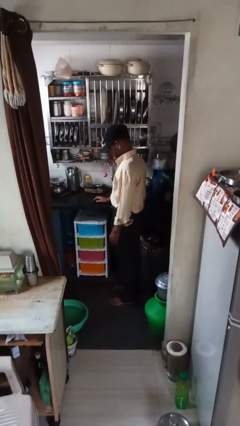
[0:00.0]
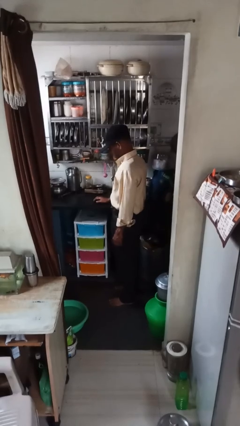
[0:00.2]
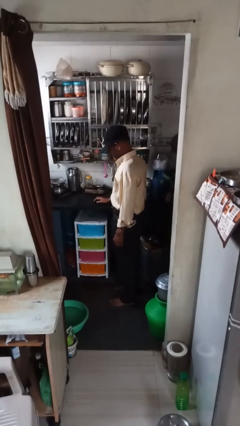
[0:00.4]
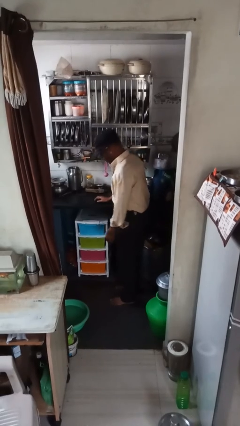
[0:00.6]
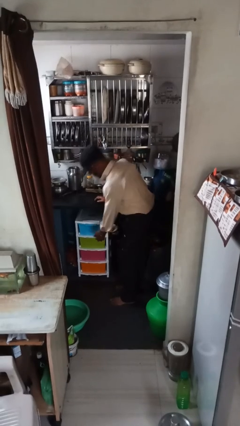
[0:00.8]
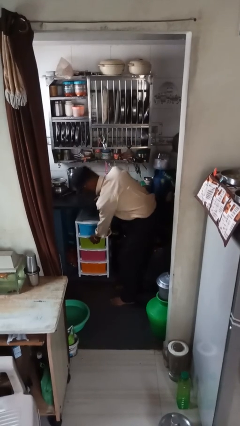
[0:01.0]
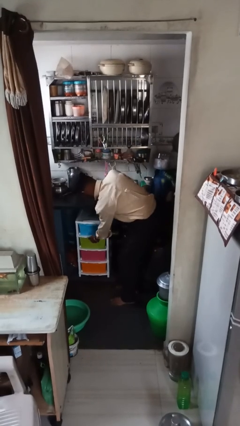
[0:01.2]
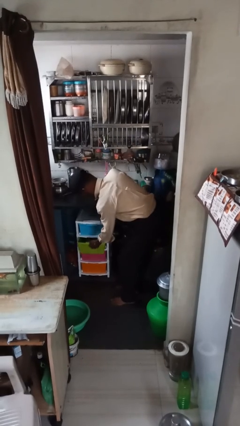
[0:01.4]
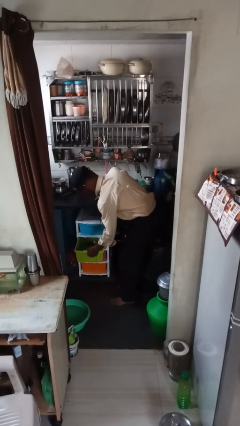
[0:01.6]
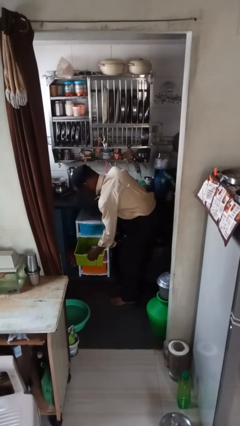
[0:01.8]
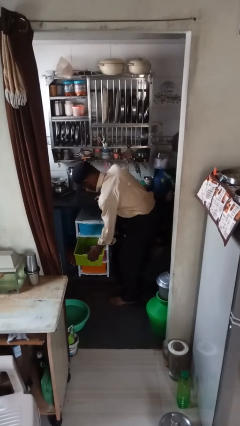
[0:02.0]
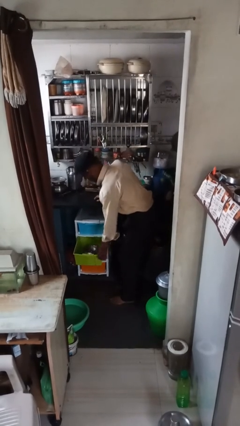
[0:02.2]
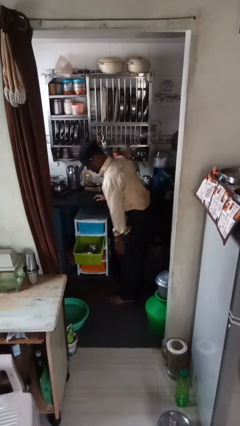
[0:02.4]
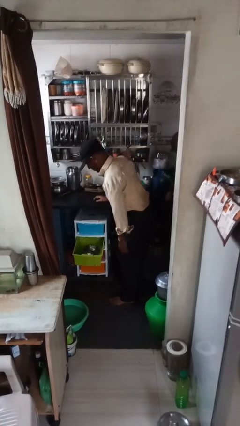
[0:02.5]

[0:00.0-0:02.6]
person opens kitchen drawer

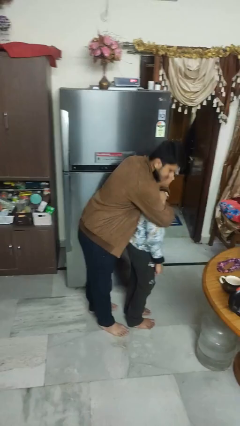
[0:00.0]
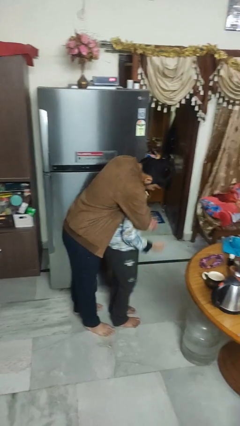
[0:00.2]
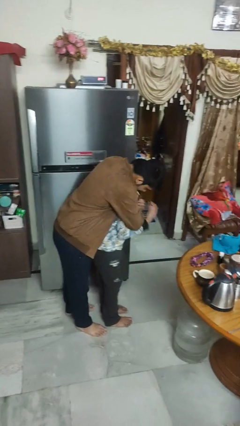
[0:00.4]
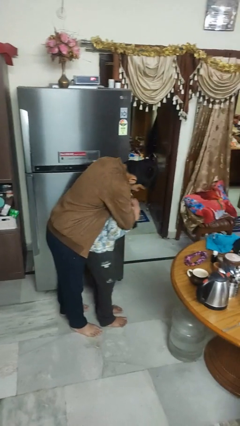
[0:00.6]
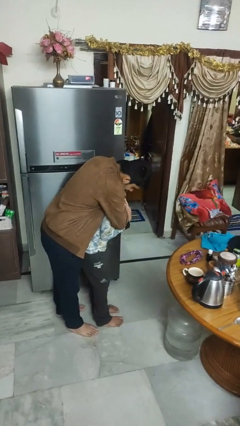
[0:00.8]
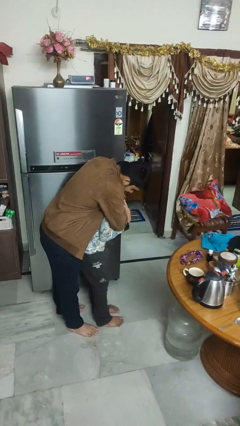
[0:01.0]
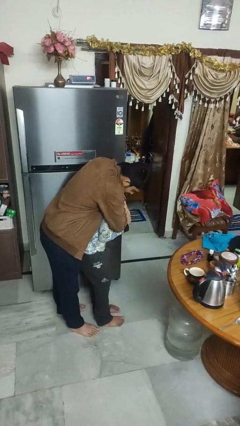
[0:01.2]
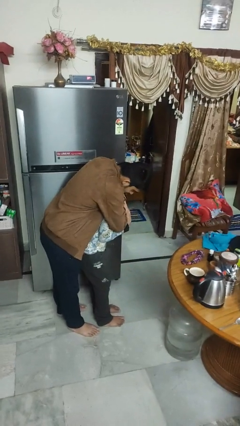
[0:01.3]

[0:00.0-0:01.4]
person hugs person from behind

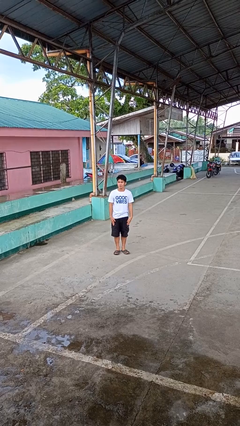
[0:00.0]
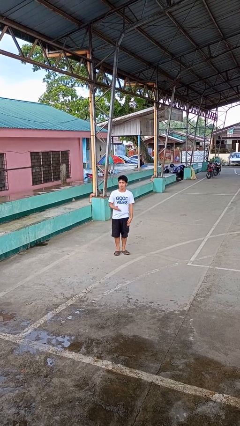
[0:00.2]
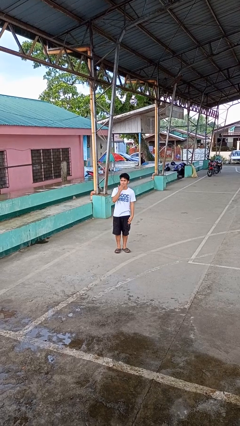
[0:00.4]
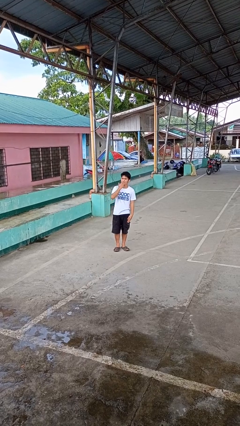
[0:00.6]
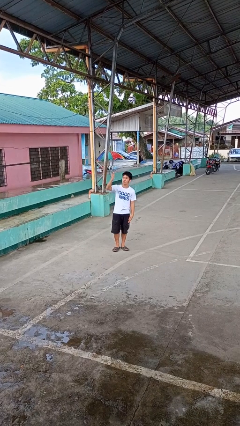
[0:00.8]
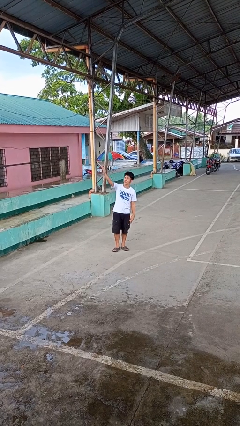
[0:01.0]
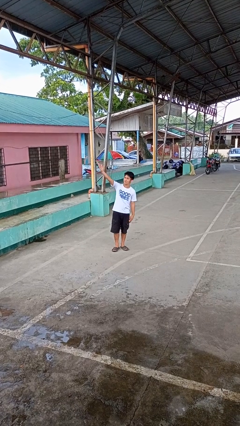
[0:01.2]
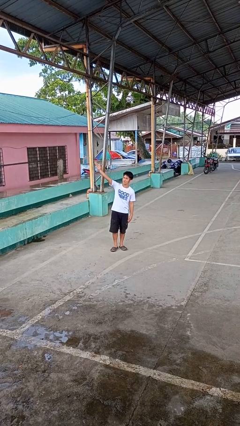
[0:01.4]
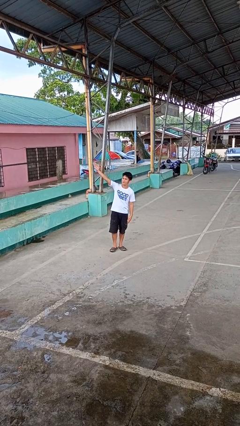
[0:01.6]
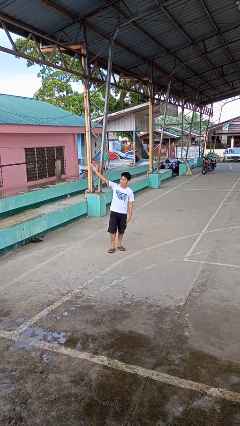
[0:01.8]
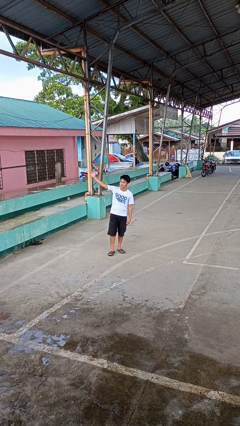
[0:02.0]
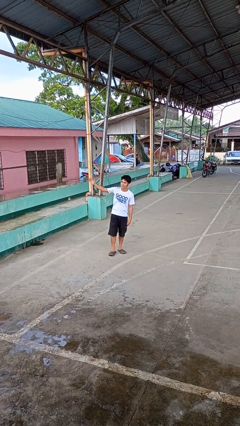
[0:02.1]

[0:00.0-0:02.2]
person gestures blow kiss

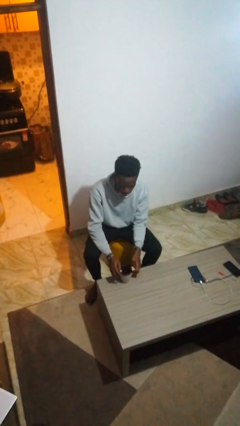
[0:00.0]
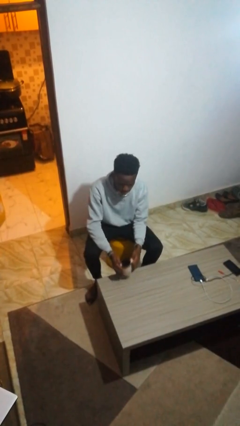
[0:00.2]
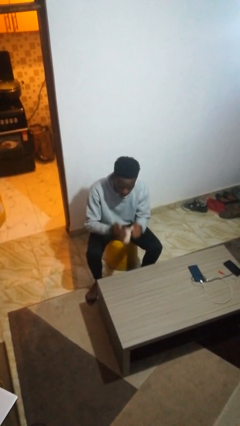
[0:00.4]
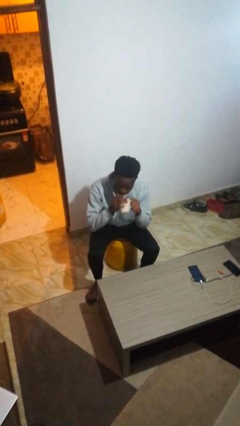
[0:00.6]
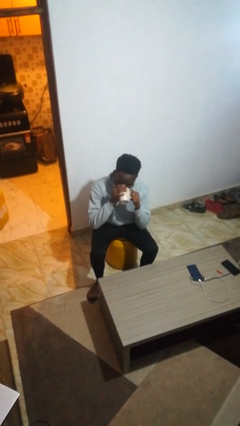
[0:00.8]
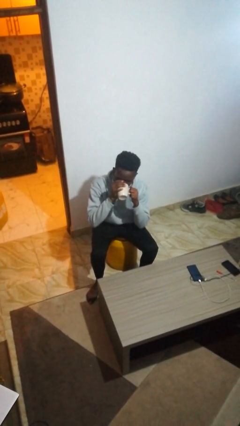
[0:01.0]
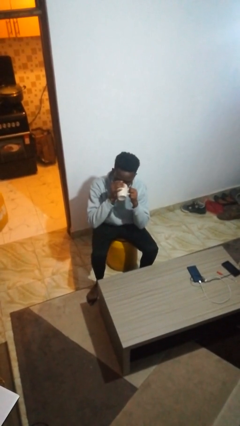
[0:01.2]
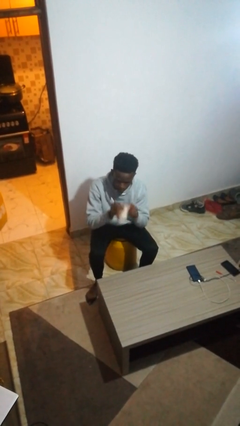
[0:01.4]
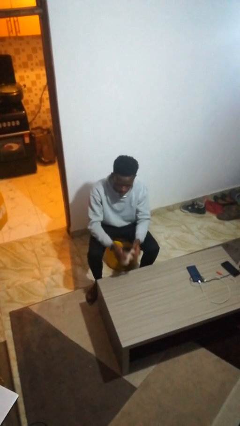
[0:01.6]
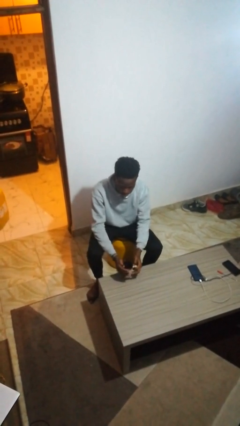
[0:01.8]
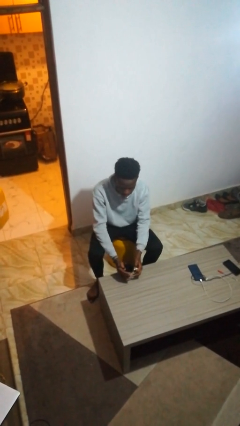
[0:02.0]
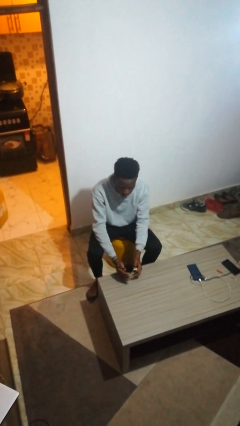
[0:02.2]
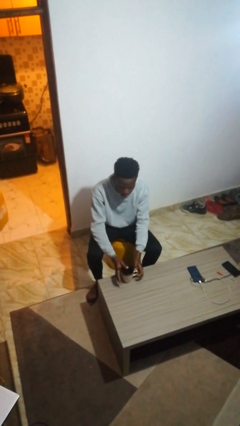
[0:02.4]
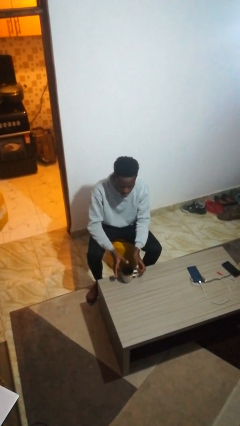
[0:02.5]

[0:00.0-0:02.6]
person drinks from mug

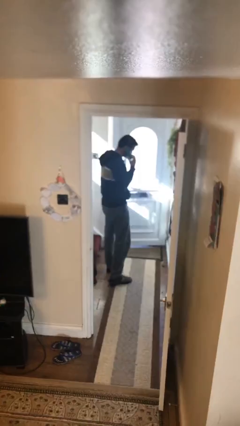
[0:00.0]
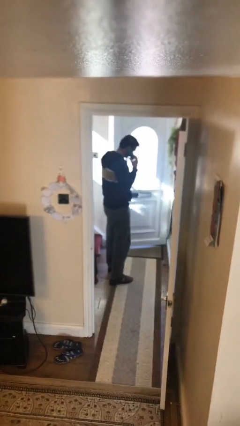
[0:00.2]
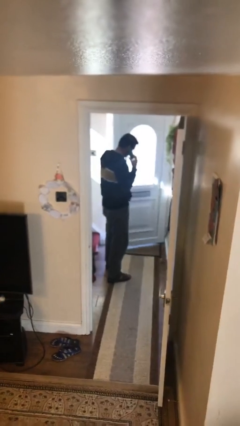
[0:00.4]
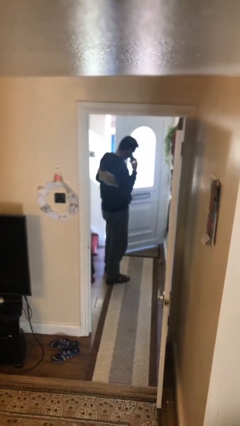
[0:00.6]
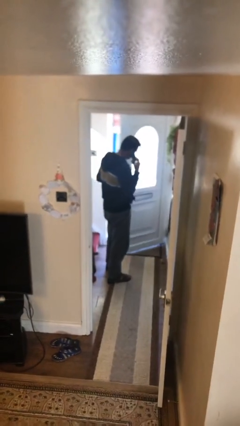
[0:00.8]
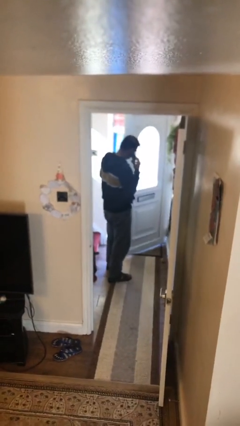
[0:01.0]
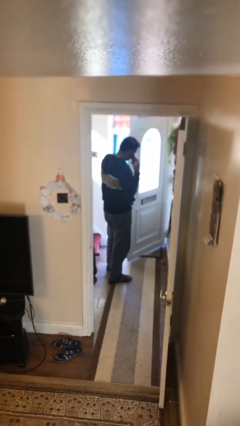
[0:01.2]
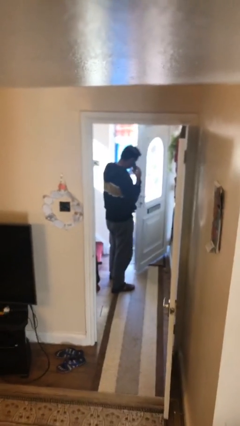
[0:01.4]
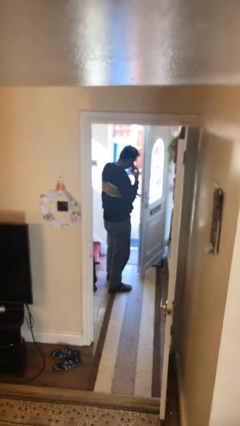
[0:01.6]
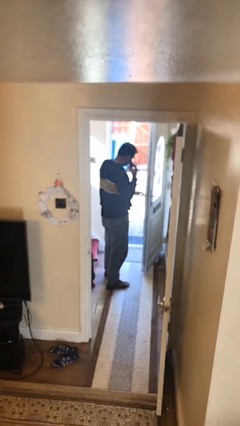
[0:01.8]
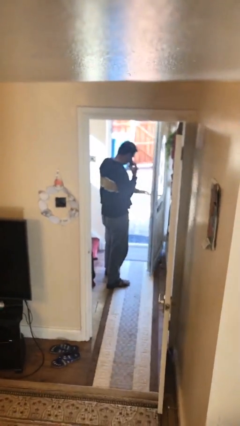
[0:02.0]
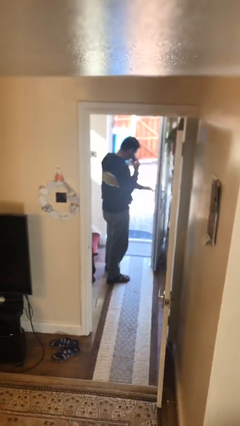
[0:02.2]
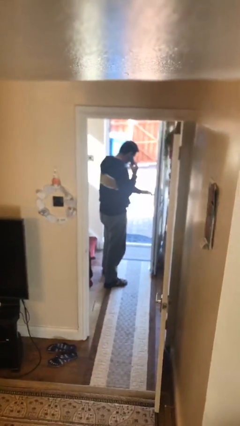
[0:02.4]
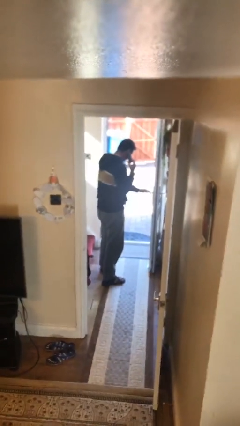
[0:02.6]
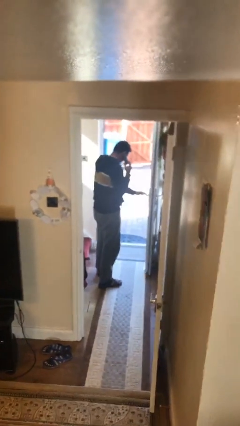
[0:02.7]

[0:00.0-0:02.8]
person opens facility door

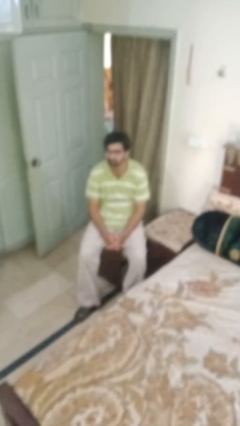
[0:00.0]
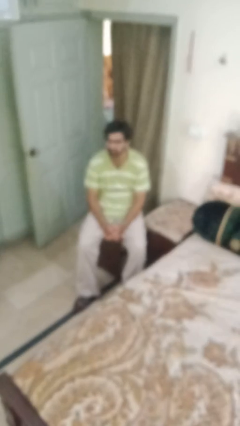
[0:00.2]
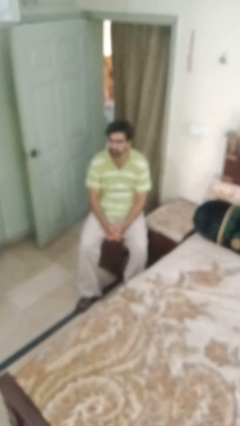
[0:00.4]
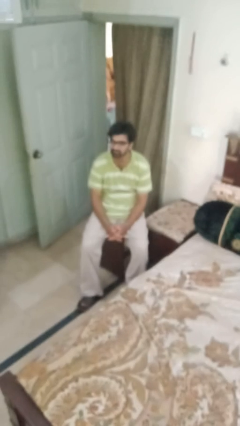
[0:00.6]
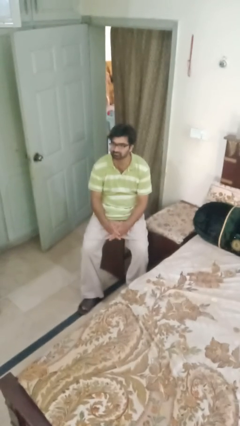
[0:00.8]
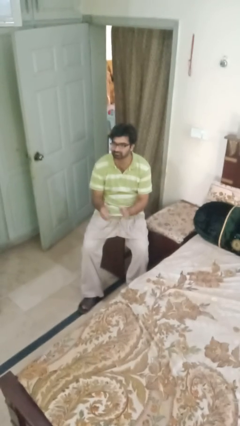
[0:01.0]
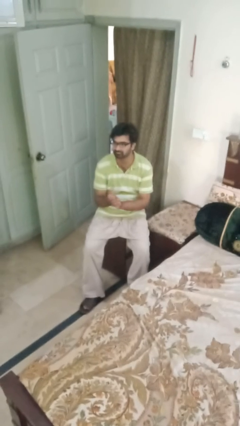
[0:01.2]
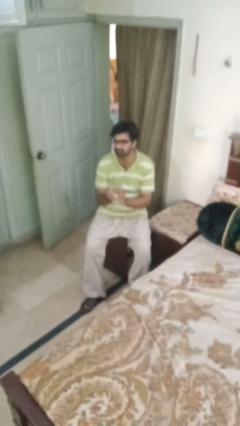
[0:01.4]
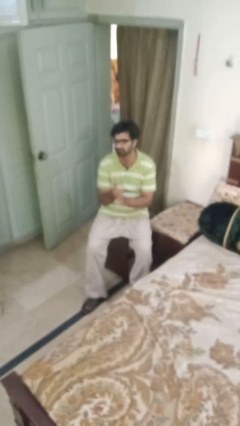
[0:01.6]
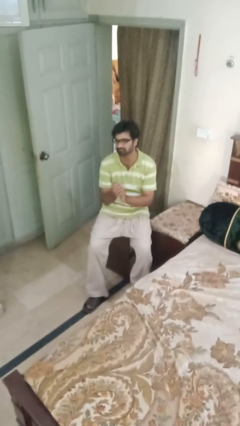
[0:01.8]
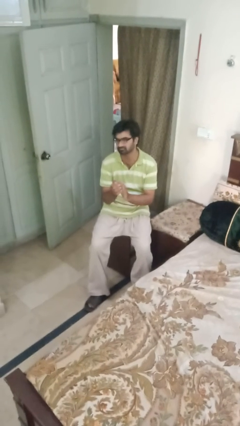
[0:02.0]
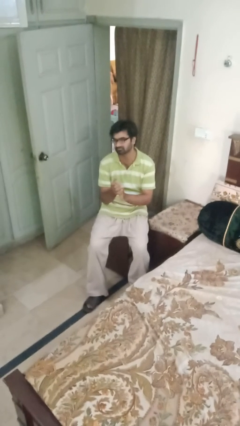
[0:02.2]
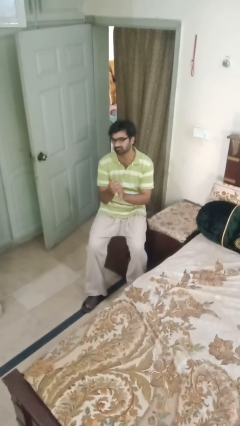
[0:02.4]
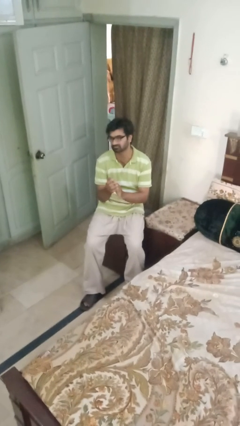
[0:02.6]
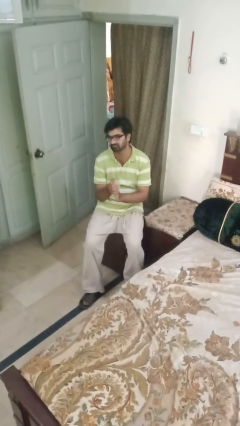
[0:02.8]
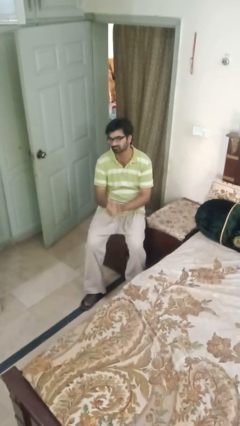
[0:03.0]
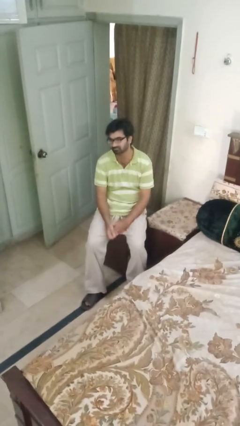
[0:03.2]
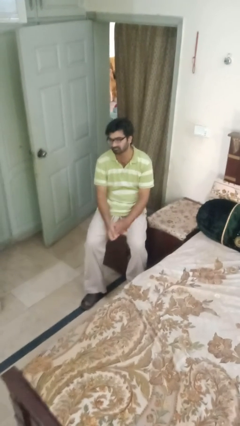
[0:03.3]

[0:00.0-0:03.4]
person claps hands

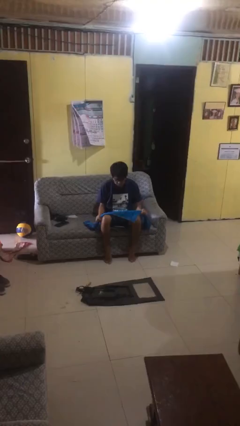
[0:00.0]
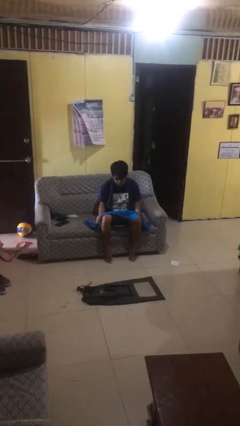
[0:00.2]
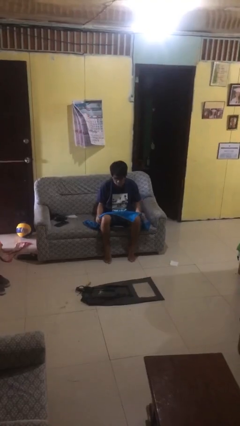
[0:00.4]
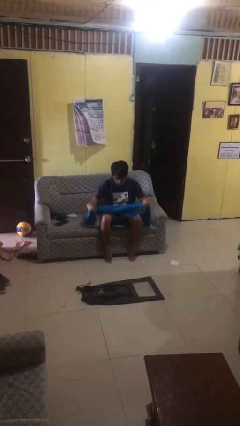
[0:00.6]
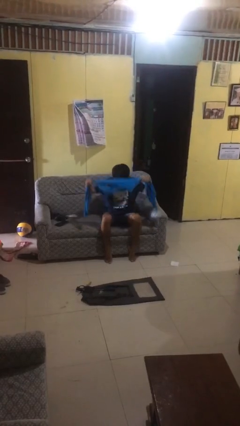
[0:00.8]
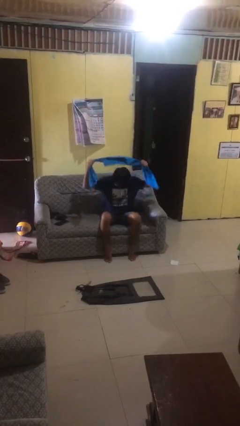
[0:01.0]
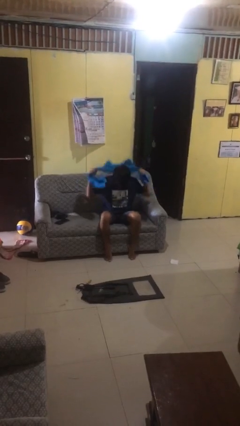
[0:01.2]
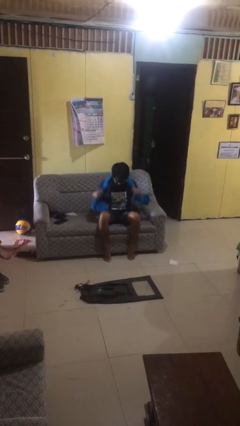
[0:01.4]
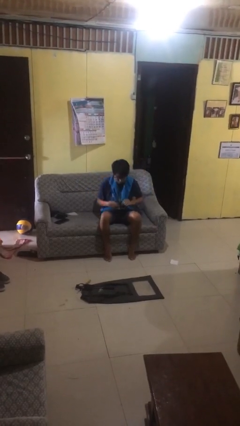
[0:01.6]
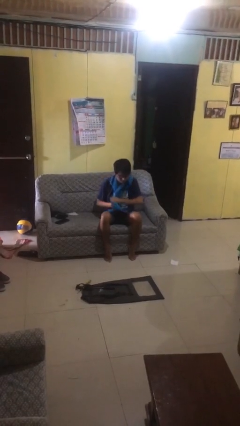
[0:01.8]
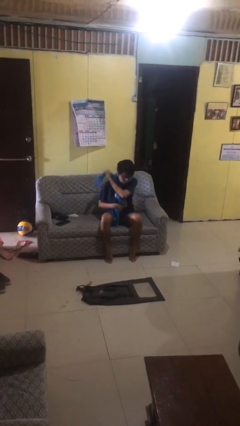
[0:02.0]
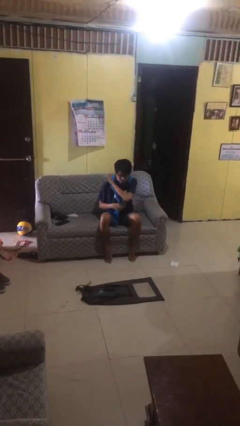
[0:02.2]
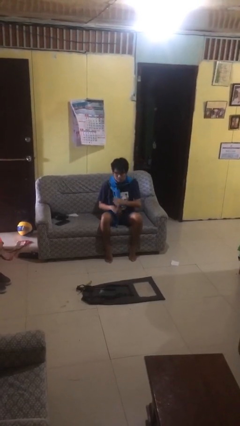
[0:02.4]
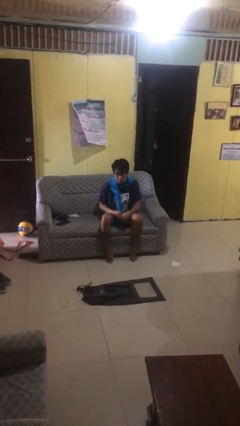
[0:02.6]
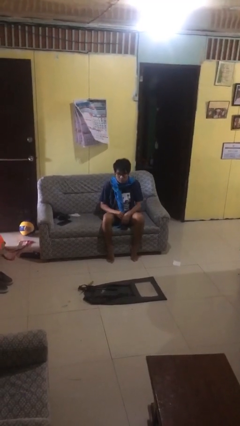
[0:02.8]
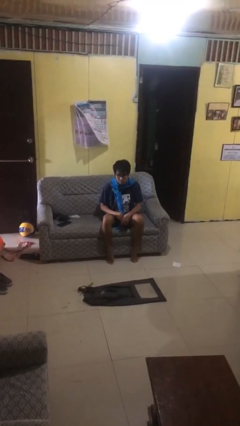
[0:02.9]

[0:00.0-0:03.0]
person puts on scarf
